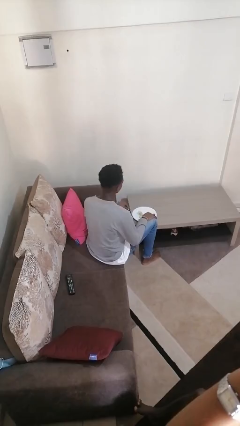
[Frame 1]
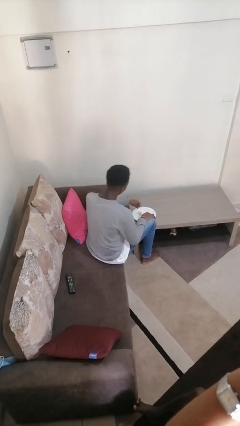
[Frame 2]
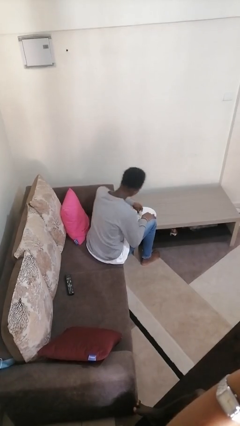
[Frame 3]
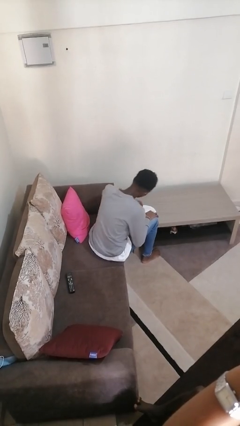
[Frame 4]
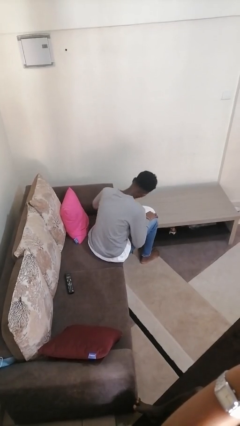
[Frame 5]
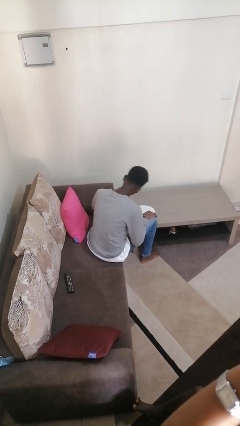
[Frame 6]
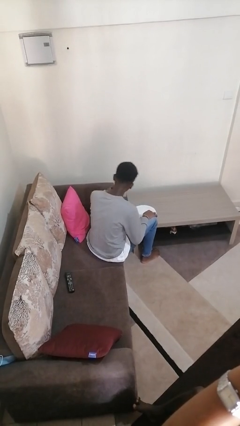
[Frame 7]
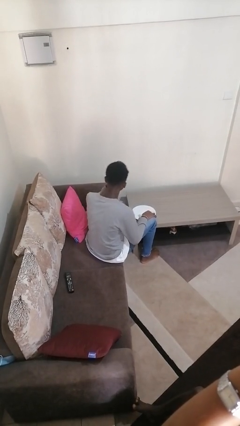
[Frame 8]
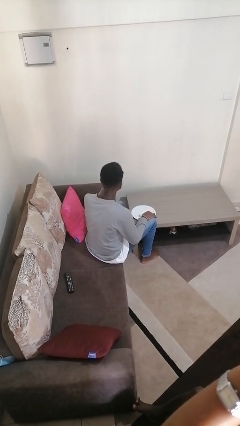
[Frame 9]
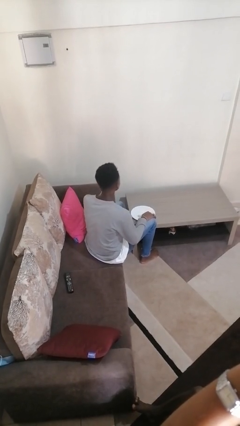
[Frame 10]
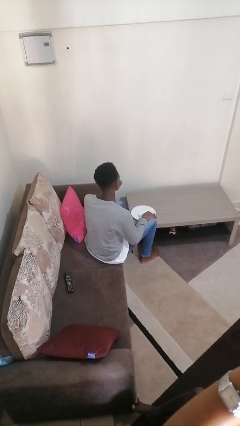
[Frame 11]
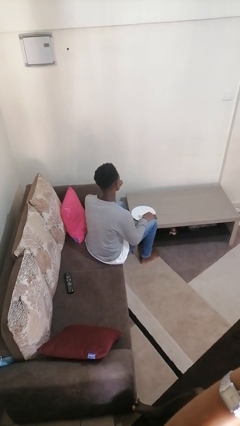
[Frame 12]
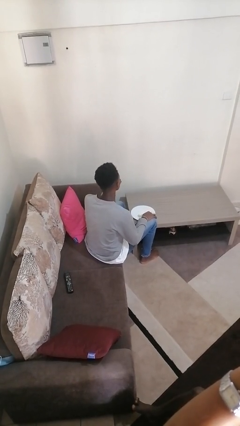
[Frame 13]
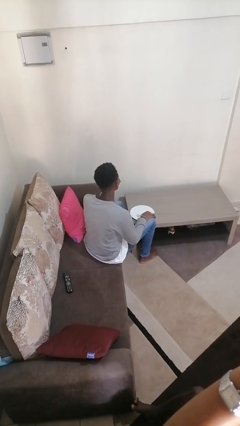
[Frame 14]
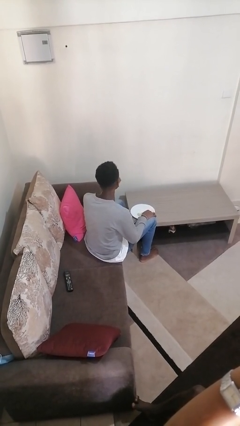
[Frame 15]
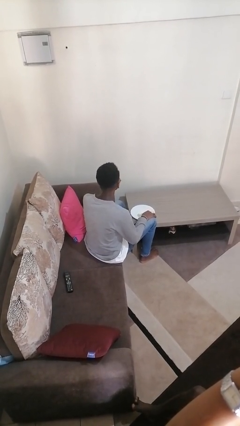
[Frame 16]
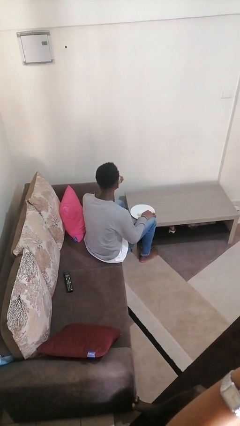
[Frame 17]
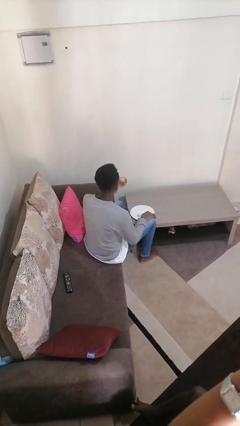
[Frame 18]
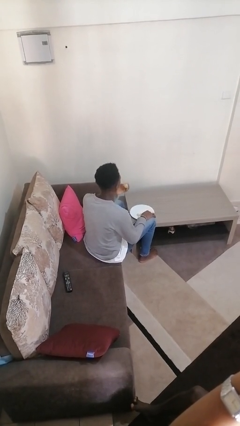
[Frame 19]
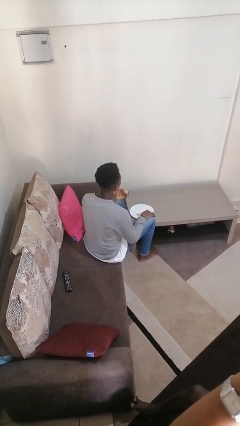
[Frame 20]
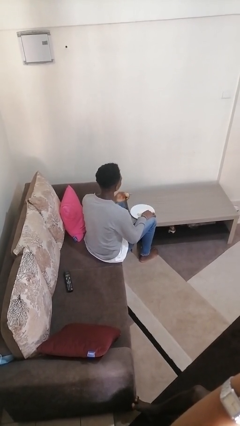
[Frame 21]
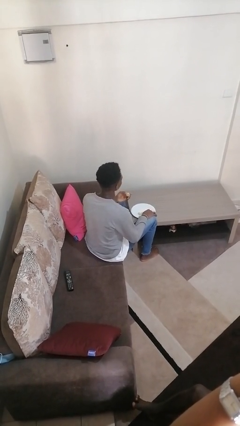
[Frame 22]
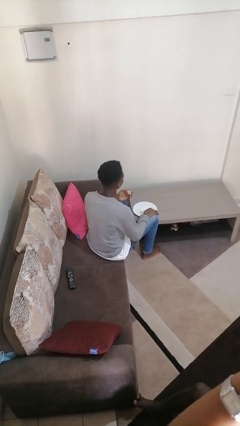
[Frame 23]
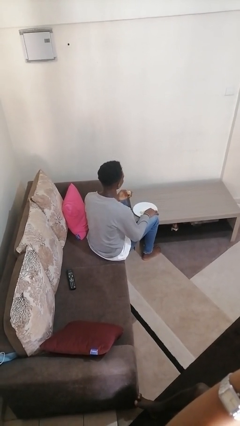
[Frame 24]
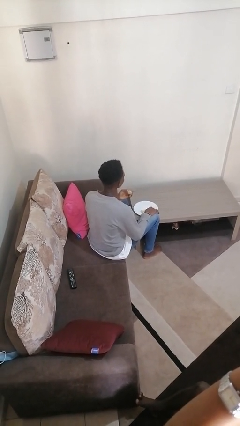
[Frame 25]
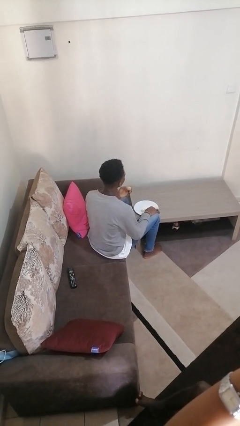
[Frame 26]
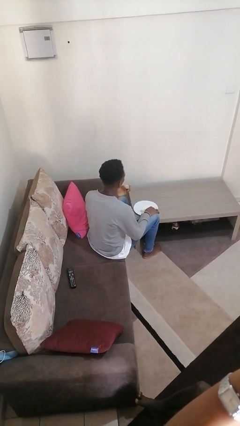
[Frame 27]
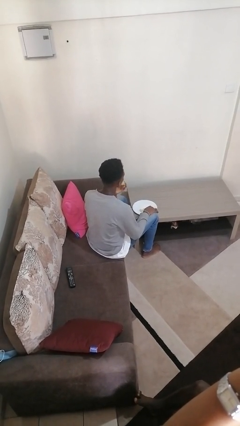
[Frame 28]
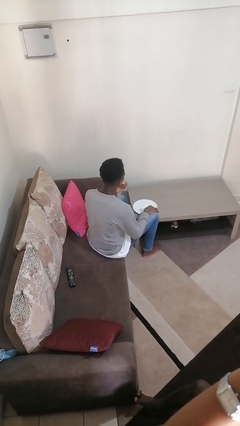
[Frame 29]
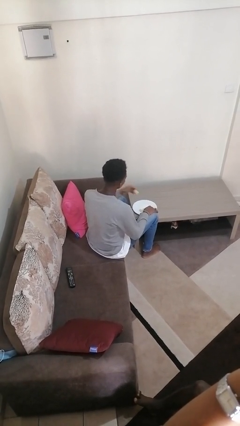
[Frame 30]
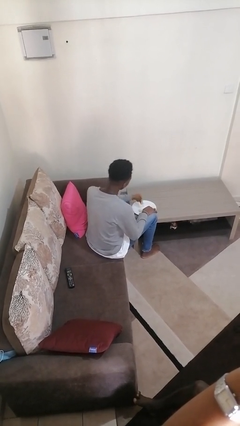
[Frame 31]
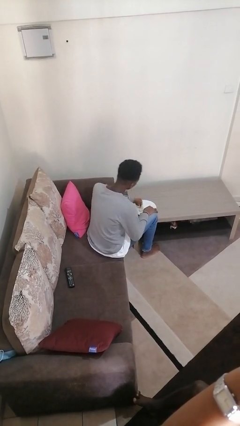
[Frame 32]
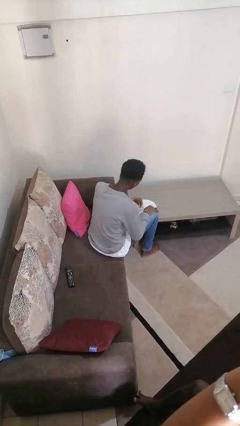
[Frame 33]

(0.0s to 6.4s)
person eats with hands

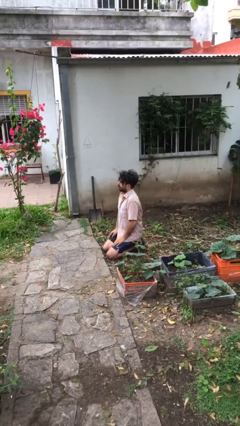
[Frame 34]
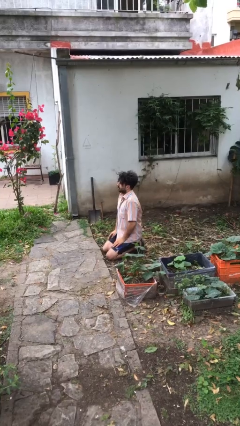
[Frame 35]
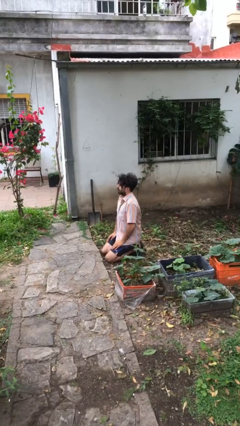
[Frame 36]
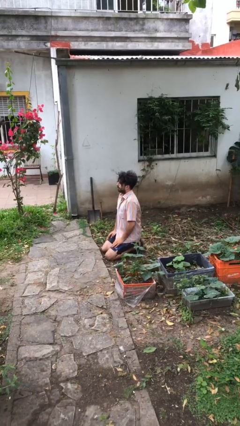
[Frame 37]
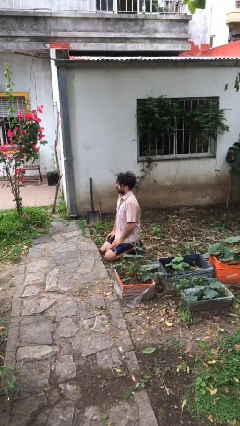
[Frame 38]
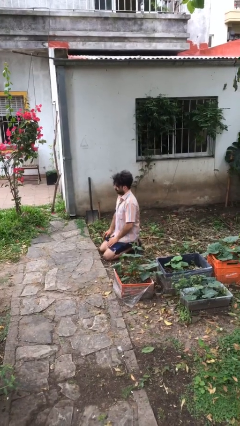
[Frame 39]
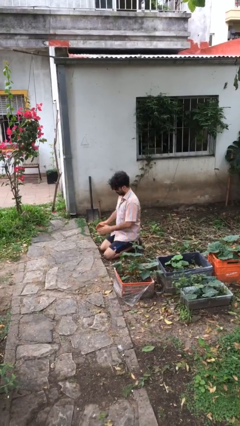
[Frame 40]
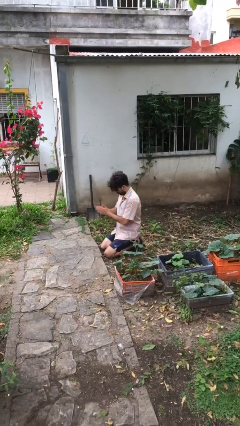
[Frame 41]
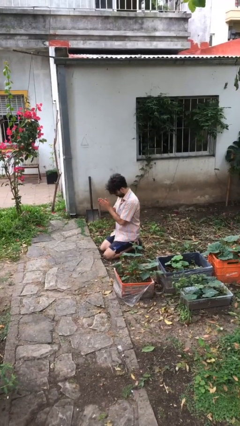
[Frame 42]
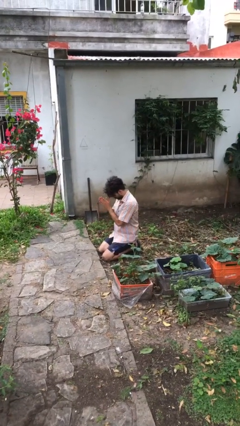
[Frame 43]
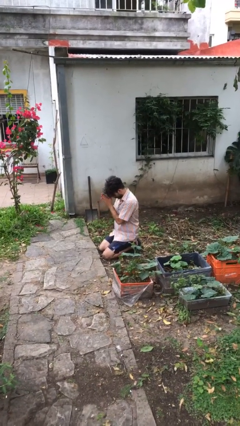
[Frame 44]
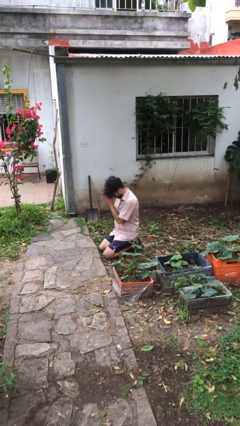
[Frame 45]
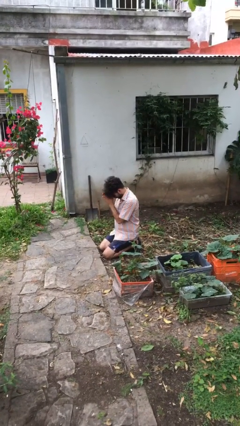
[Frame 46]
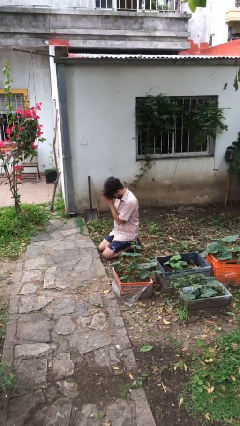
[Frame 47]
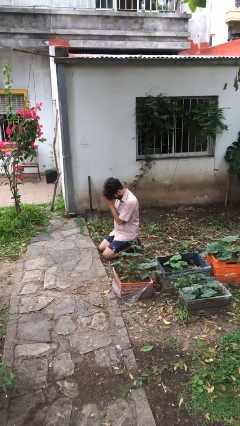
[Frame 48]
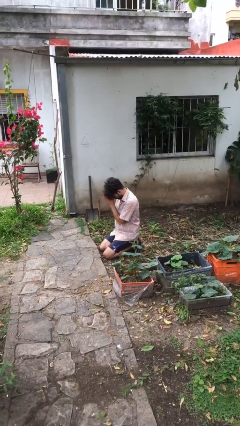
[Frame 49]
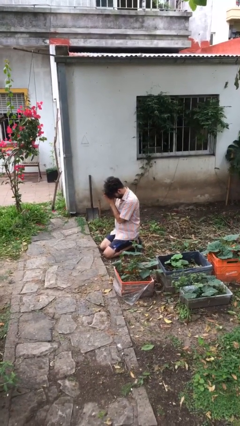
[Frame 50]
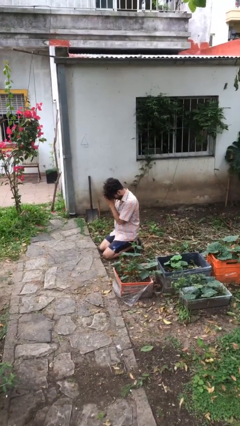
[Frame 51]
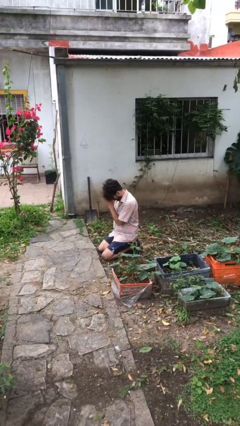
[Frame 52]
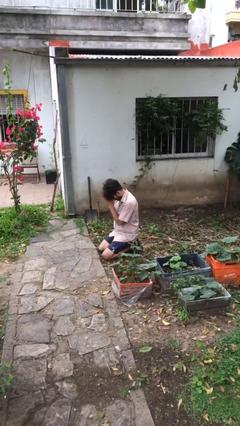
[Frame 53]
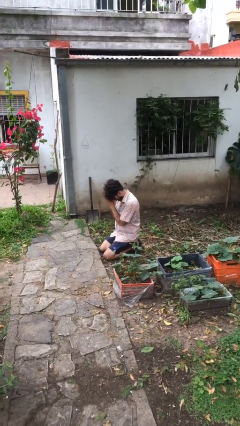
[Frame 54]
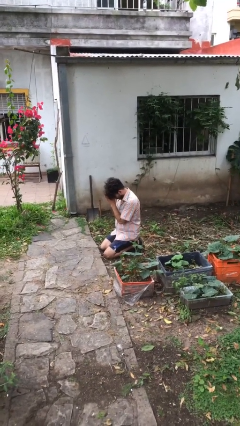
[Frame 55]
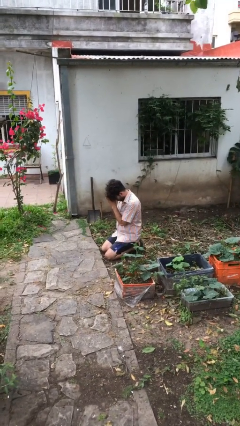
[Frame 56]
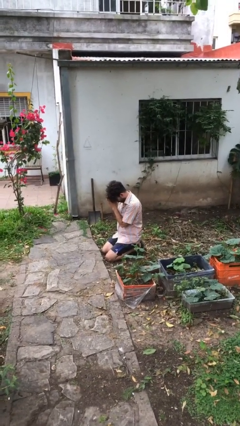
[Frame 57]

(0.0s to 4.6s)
person prays

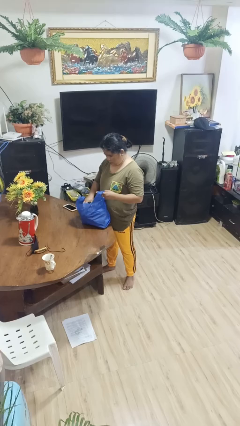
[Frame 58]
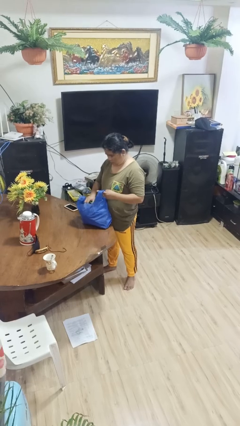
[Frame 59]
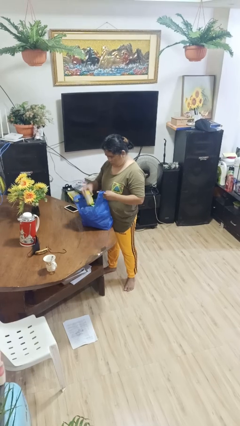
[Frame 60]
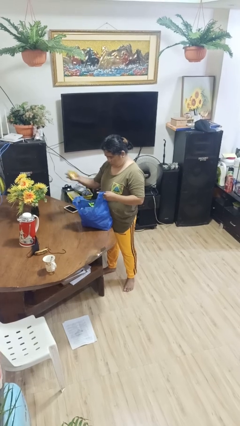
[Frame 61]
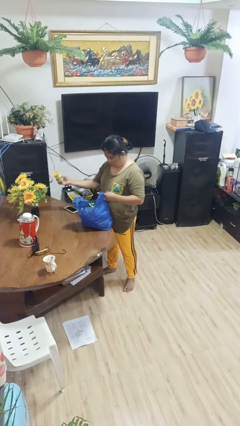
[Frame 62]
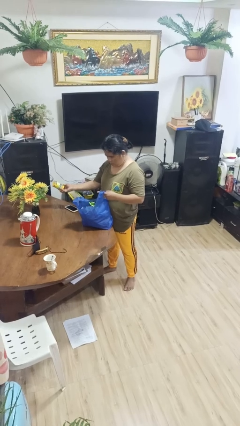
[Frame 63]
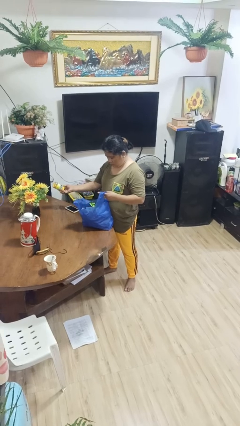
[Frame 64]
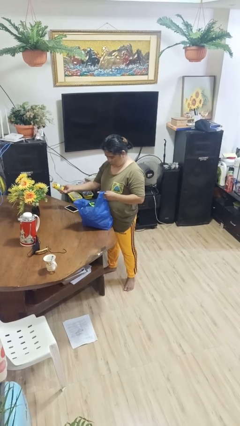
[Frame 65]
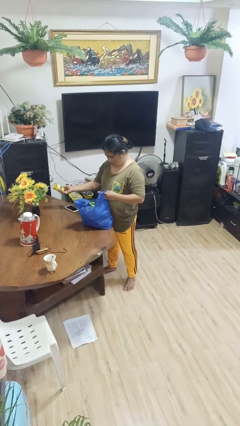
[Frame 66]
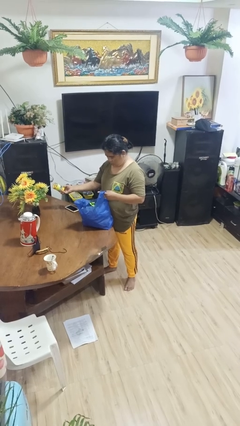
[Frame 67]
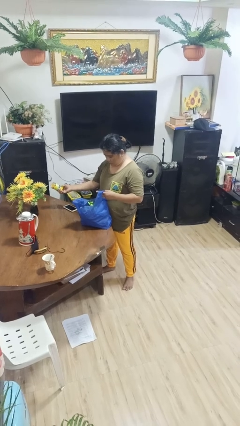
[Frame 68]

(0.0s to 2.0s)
person takes object from bag

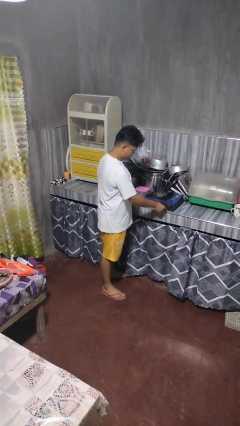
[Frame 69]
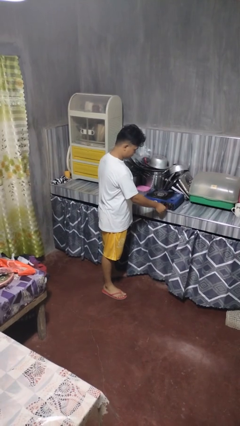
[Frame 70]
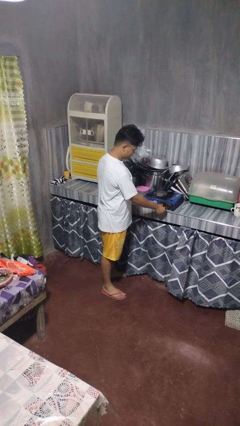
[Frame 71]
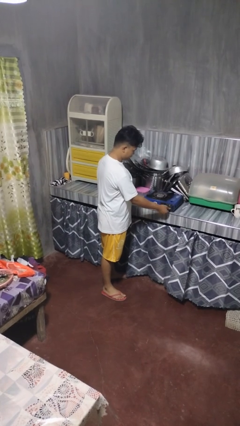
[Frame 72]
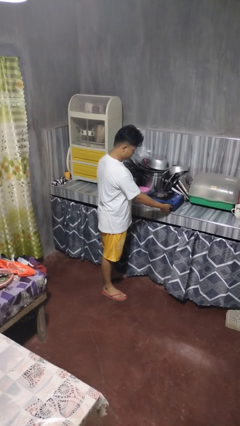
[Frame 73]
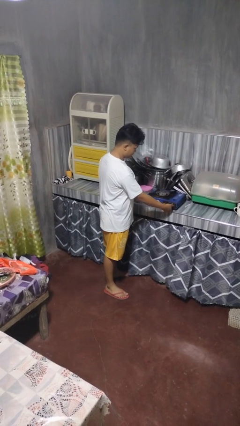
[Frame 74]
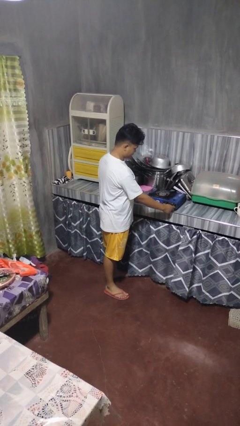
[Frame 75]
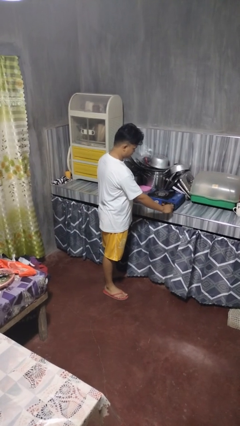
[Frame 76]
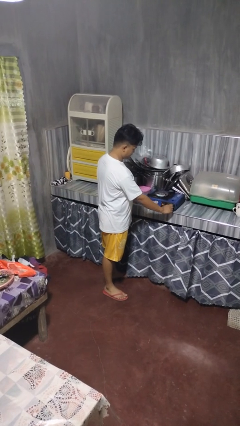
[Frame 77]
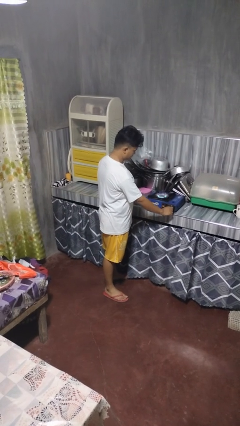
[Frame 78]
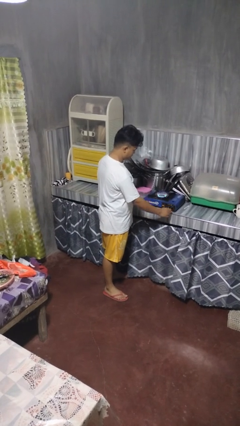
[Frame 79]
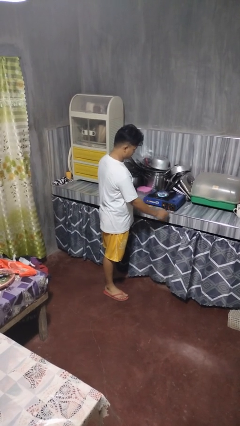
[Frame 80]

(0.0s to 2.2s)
person turns on stovetop

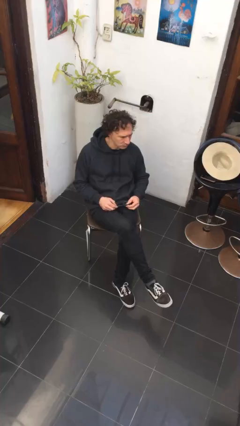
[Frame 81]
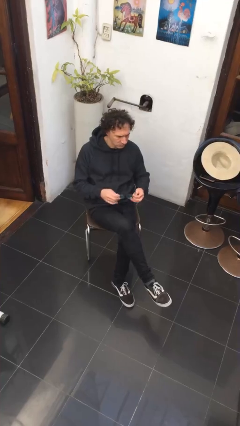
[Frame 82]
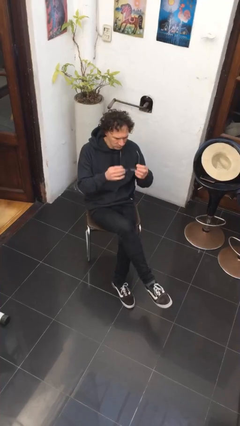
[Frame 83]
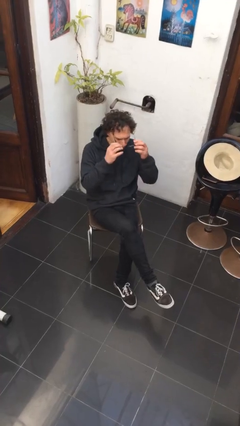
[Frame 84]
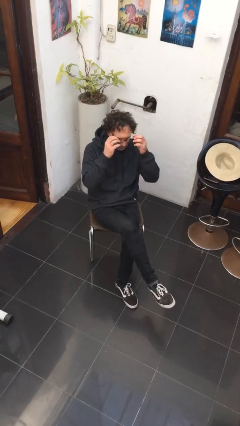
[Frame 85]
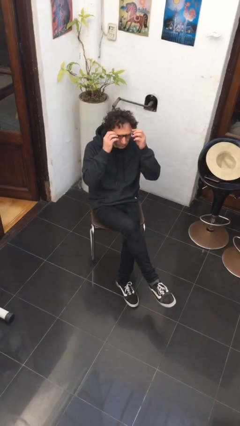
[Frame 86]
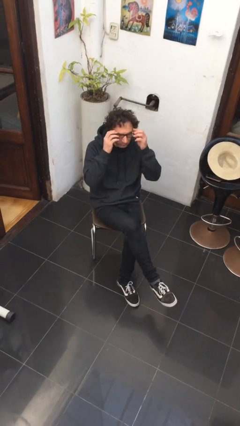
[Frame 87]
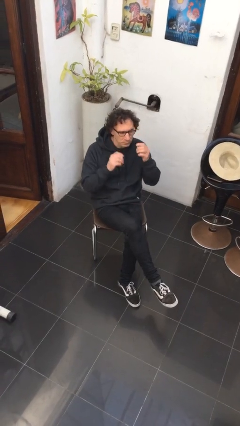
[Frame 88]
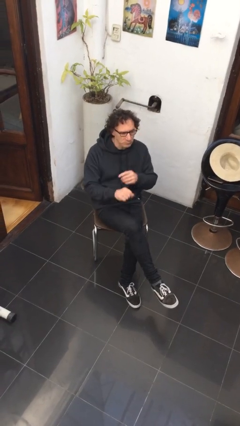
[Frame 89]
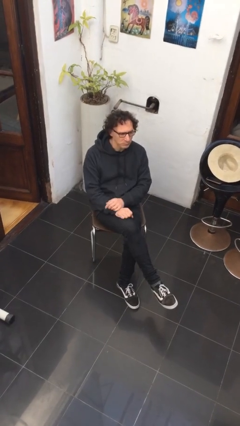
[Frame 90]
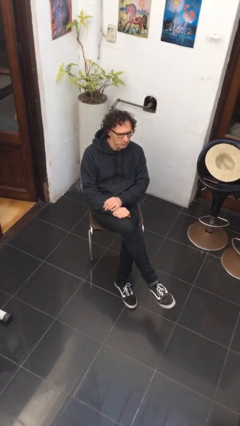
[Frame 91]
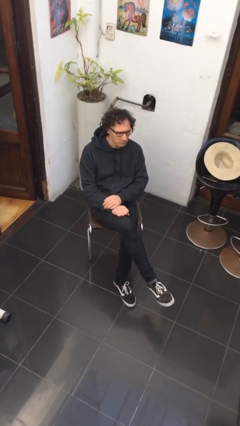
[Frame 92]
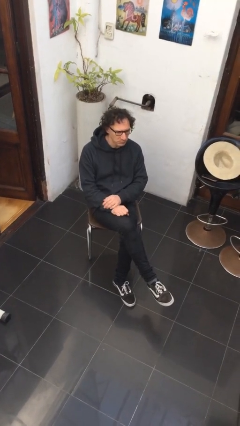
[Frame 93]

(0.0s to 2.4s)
person puts on glasses
